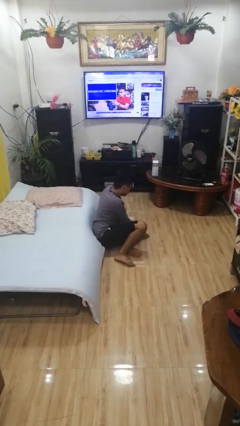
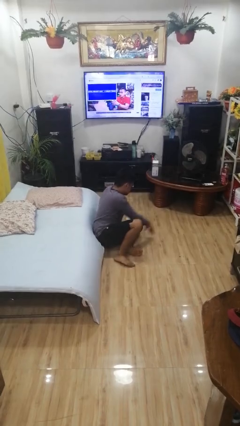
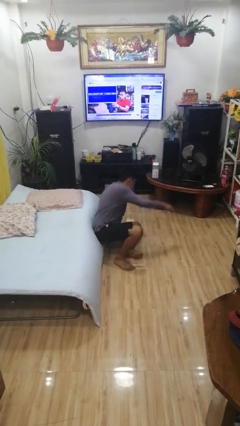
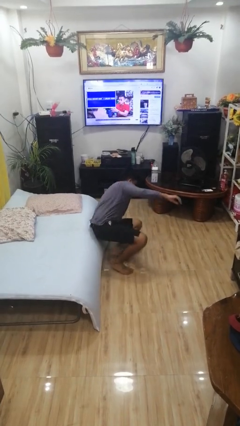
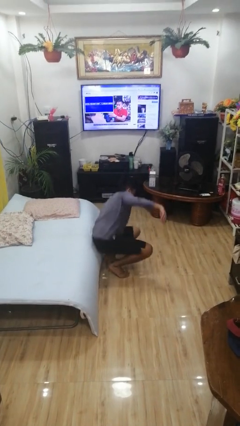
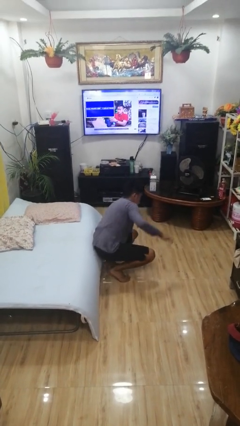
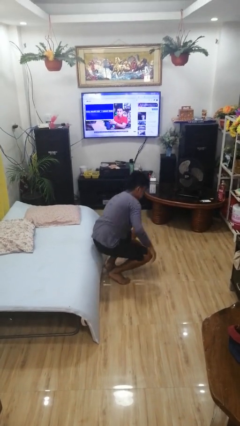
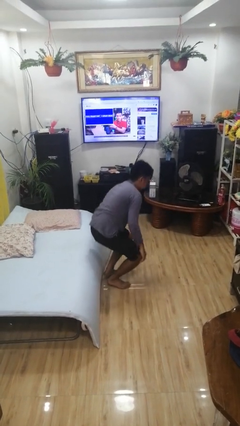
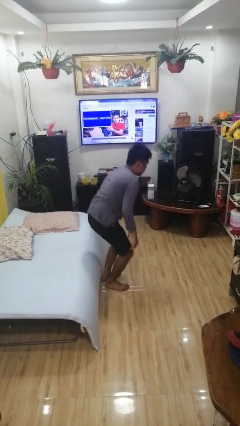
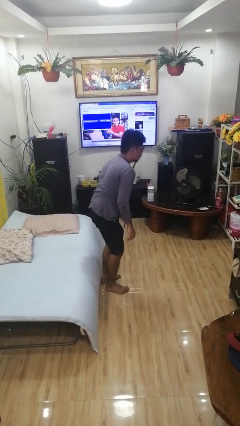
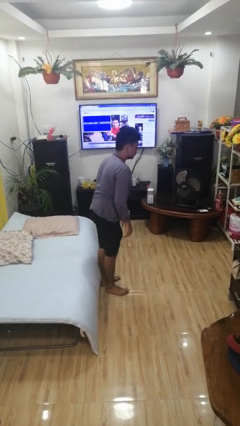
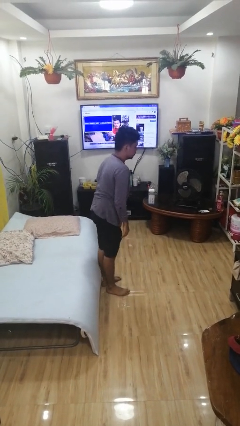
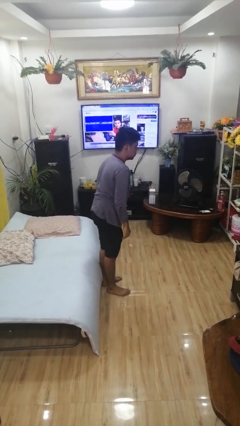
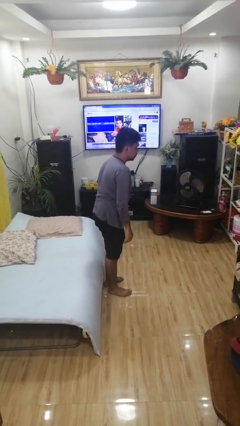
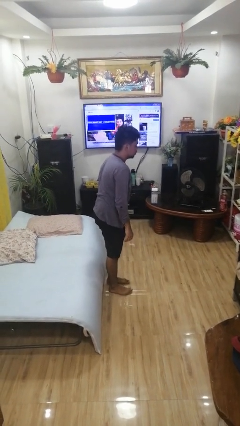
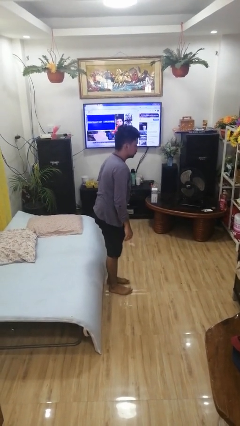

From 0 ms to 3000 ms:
person stands up from floor

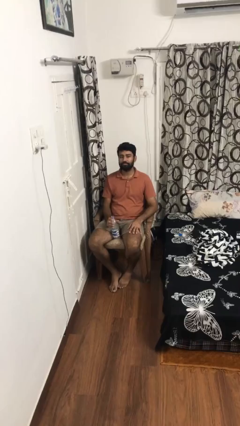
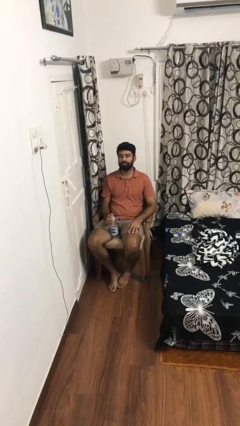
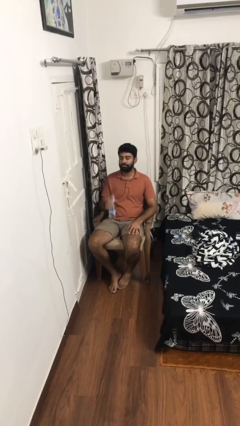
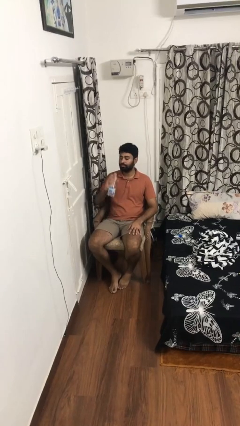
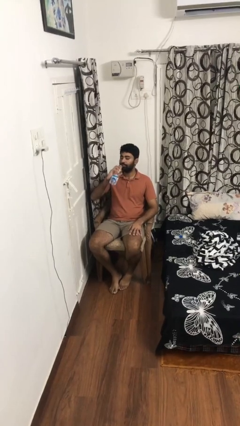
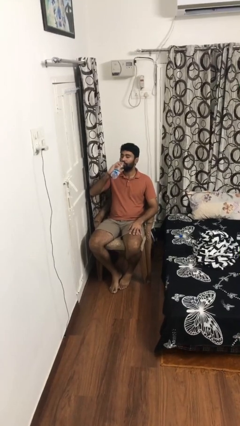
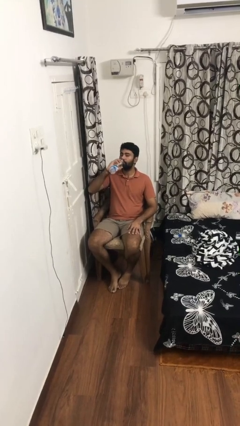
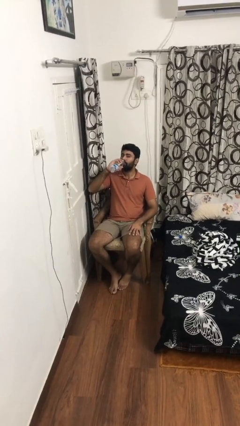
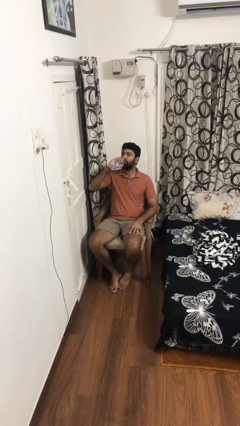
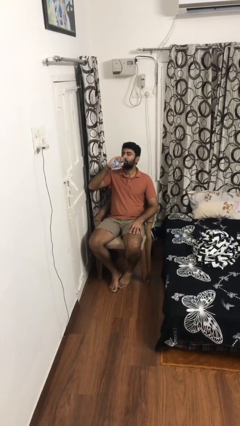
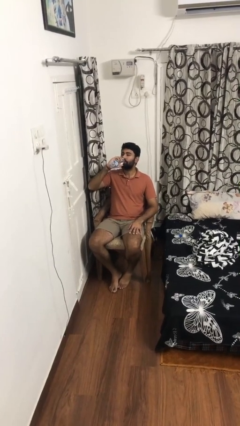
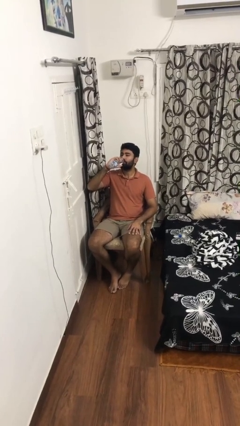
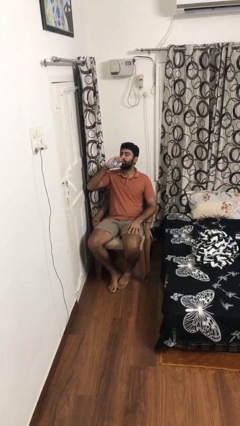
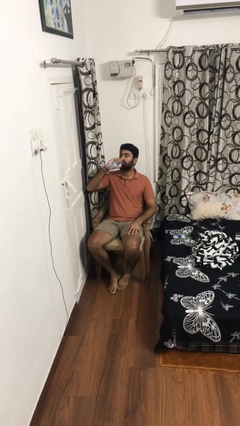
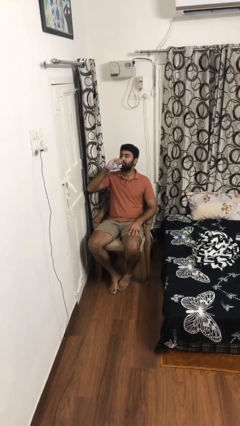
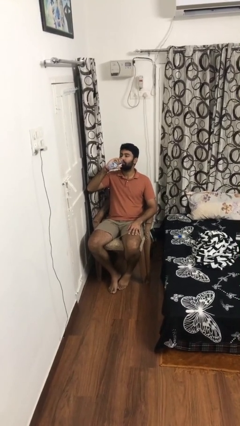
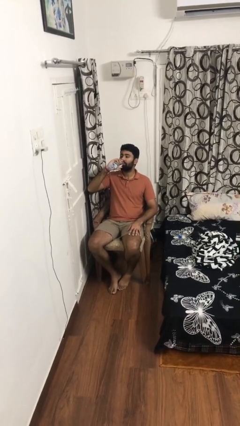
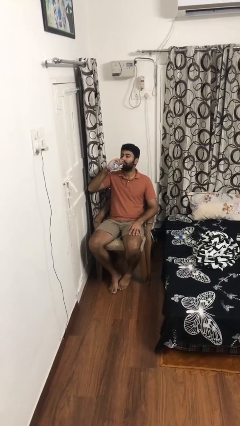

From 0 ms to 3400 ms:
person drinks from bottle

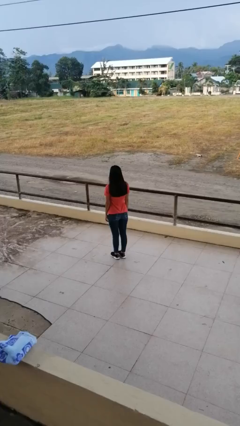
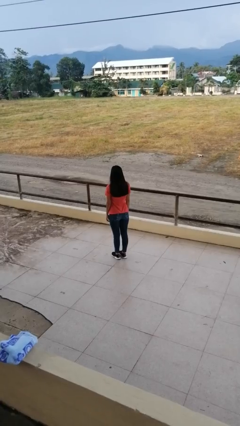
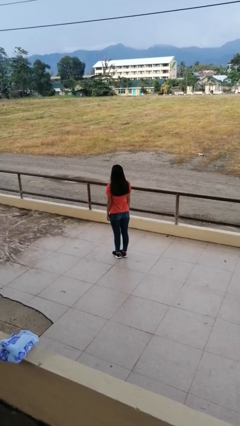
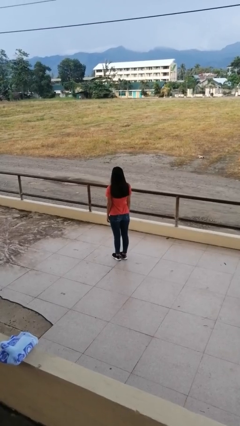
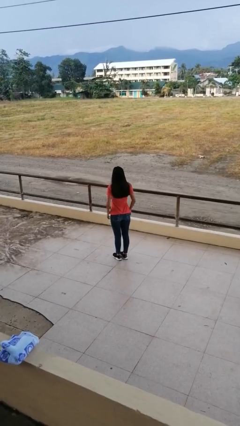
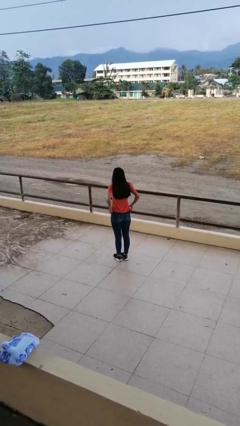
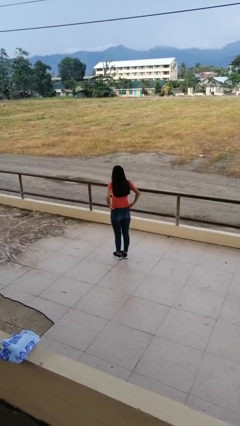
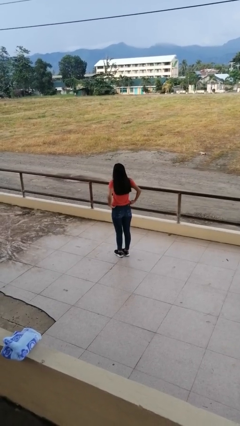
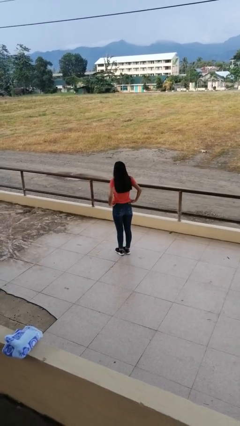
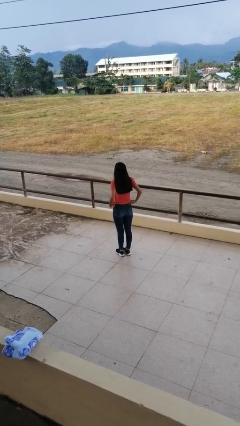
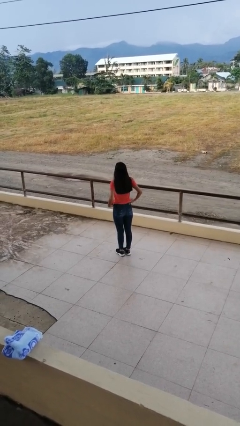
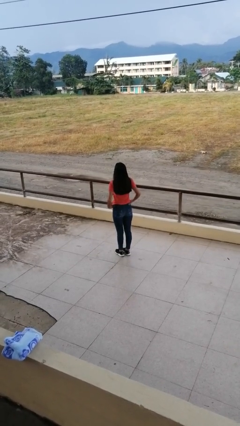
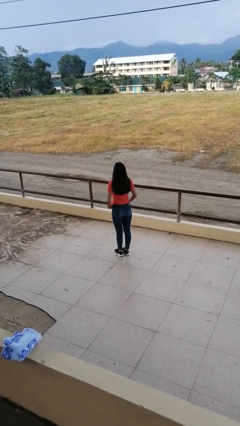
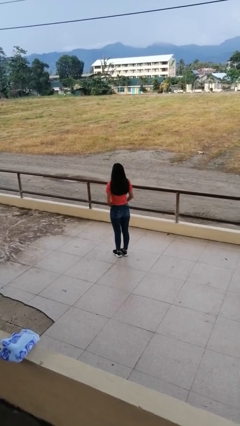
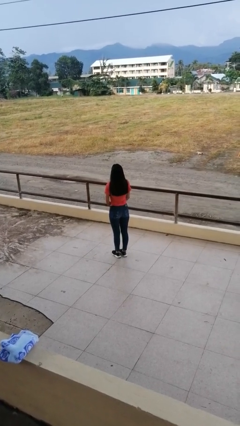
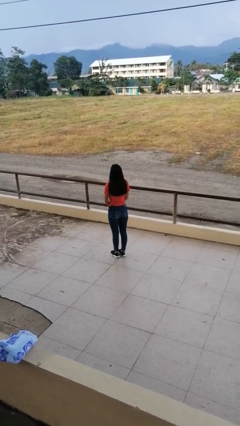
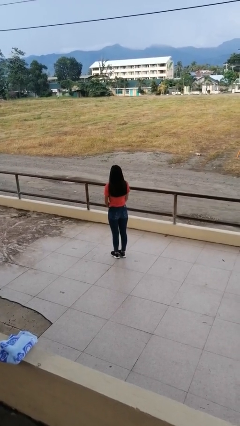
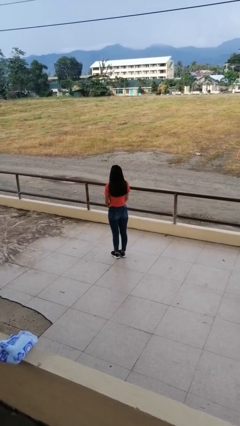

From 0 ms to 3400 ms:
person tucks in shirt

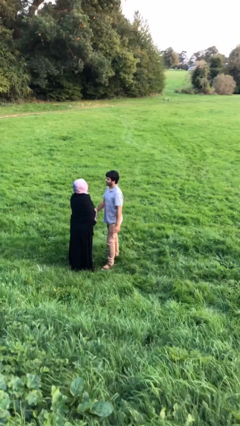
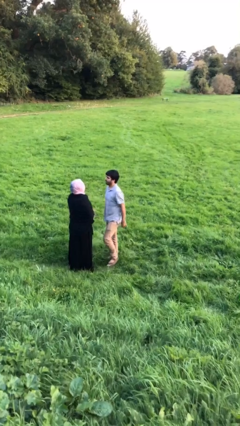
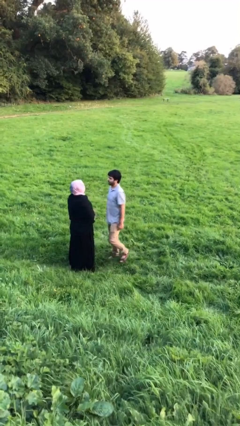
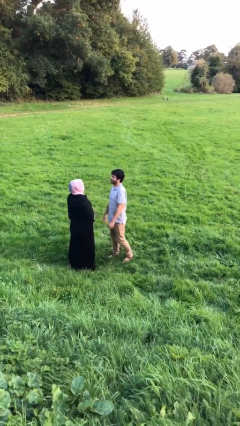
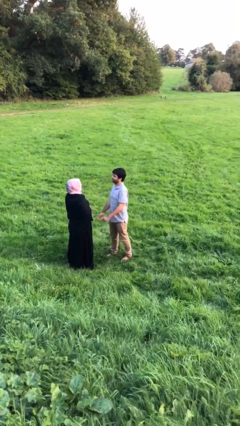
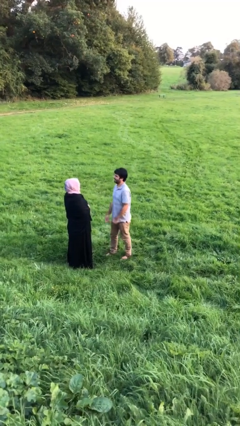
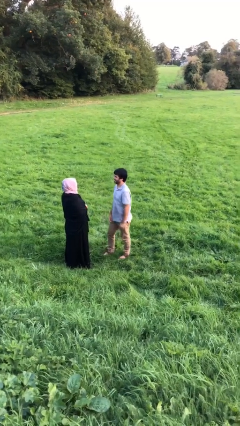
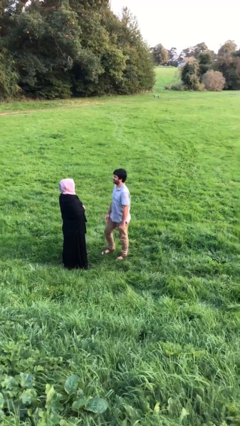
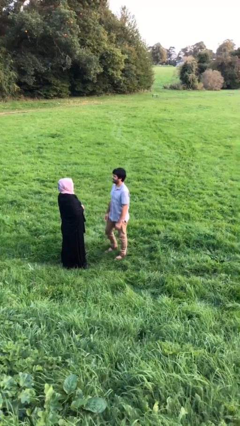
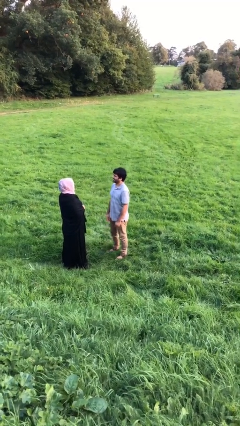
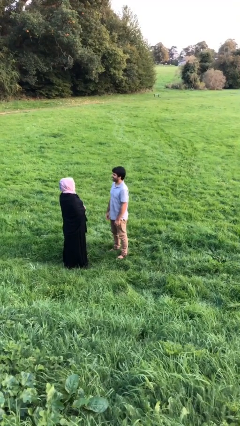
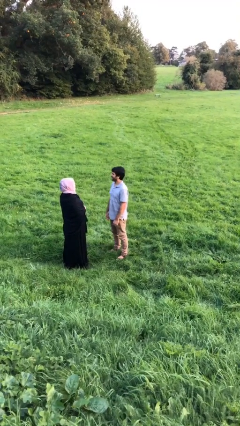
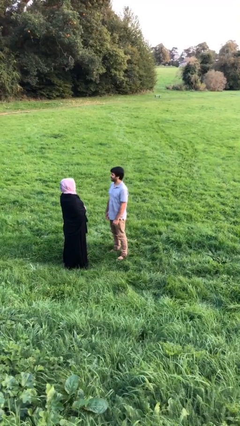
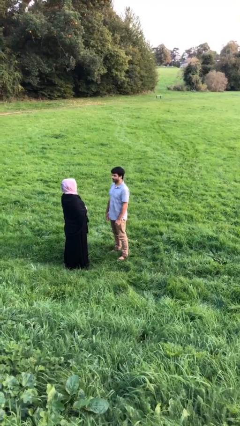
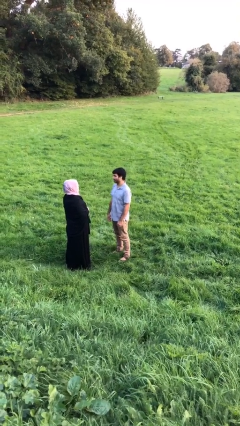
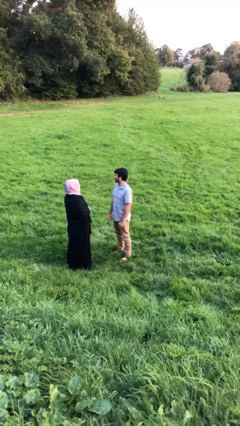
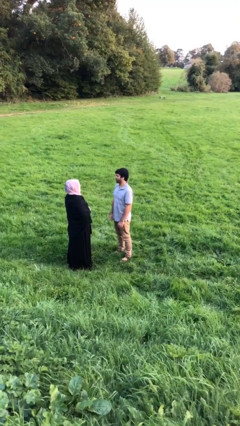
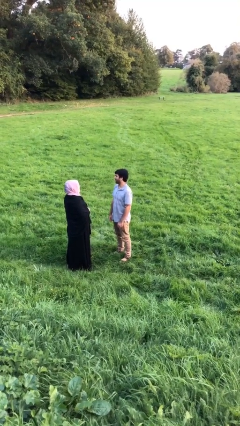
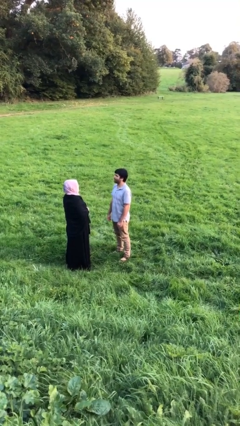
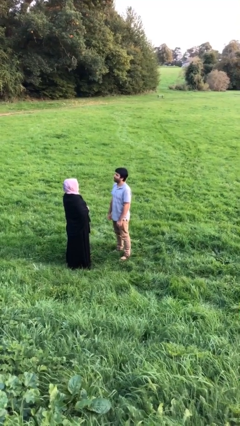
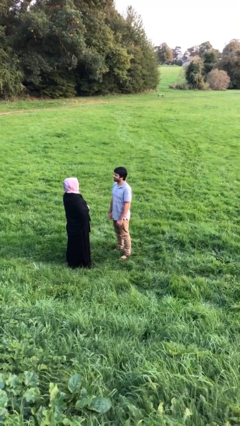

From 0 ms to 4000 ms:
person talks to person

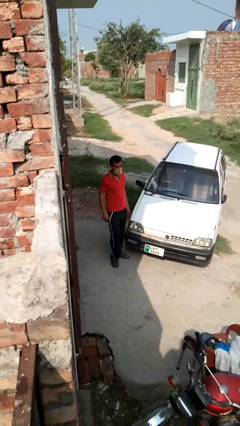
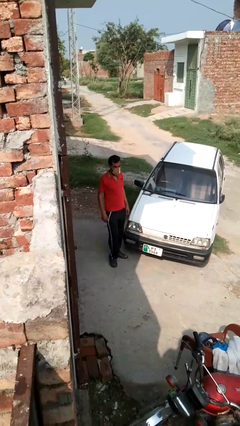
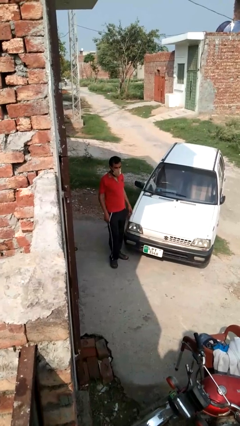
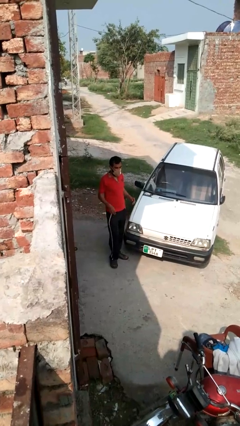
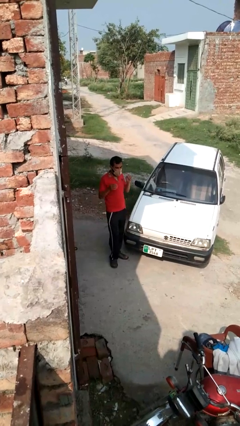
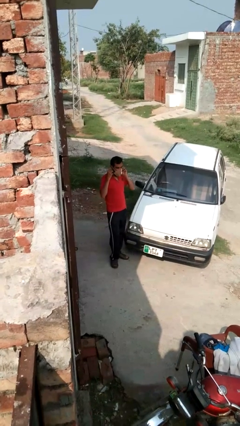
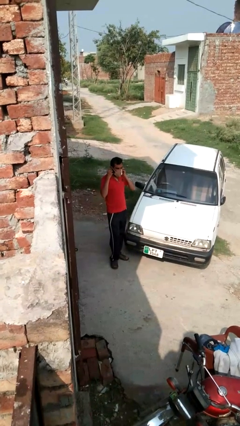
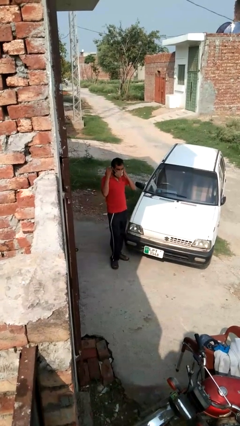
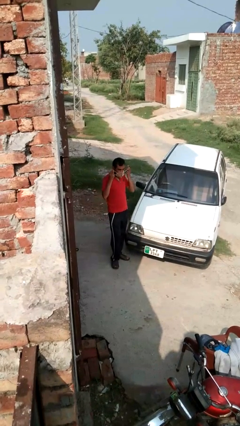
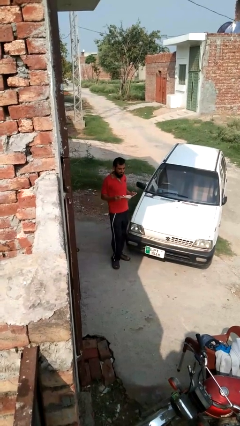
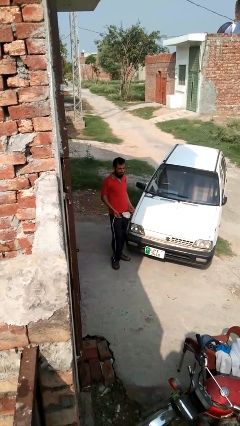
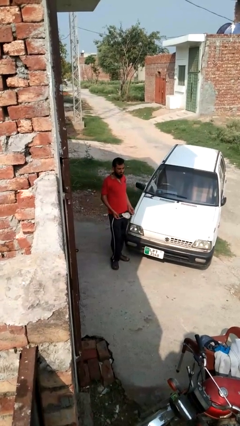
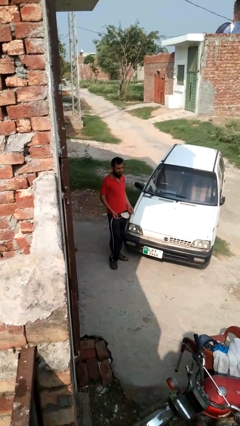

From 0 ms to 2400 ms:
person takes off facemask

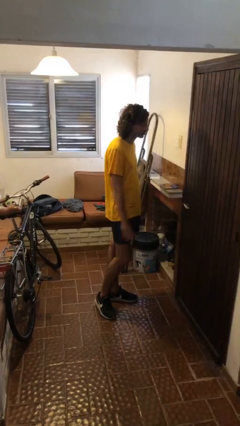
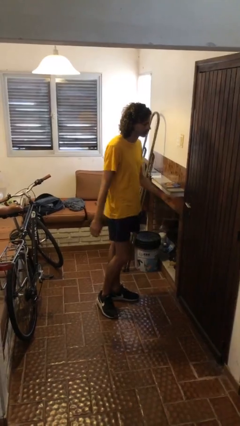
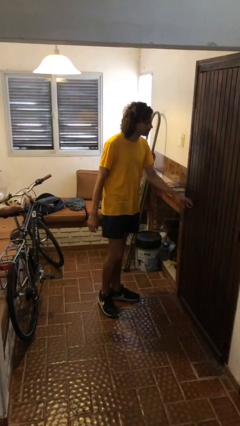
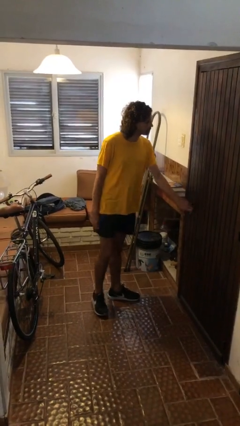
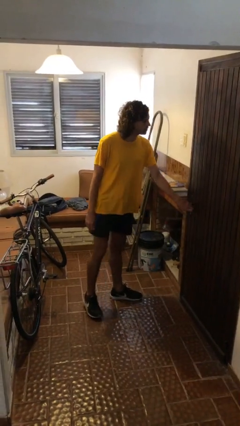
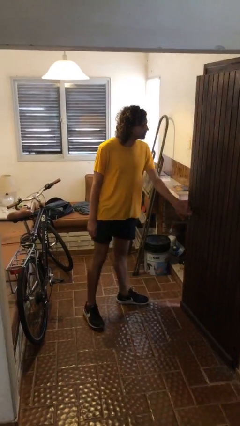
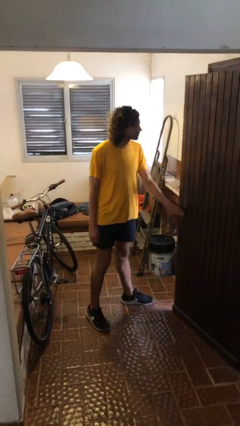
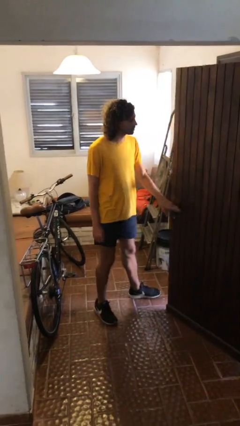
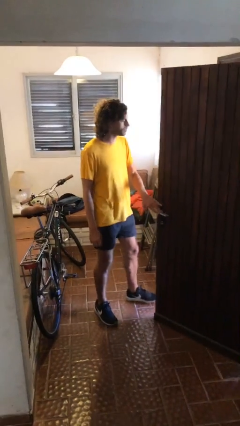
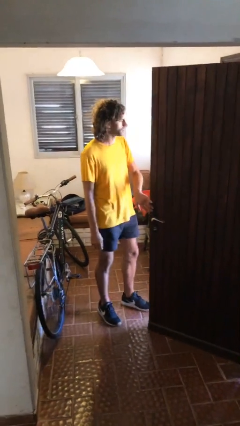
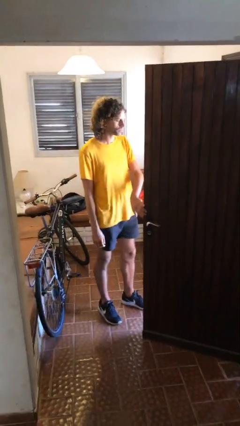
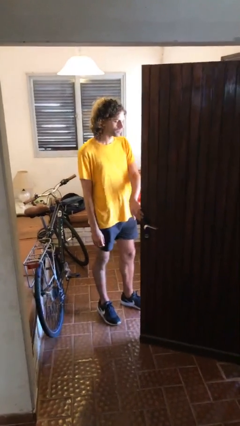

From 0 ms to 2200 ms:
person opens facility door
